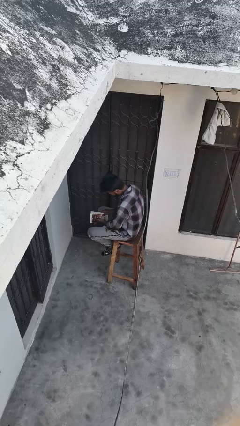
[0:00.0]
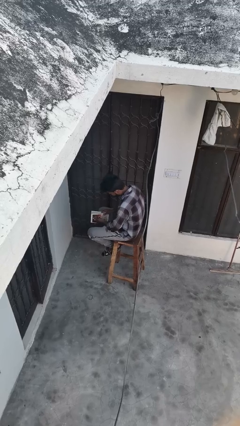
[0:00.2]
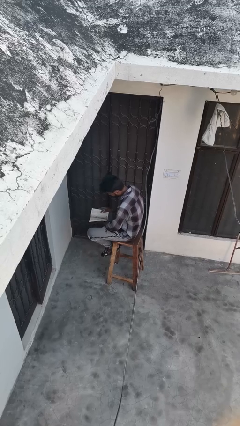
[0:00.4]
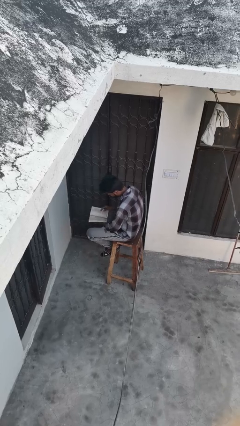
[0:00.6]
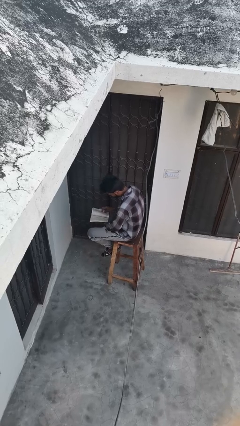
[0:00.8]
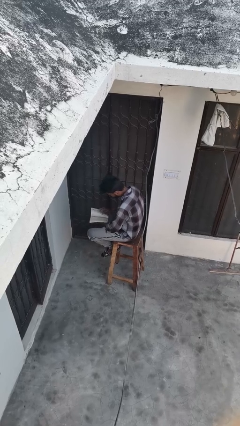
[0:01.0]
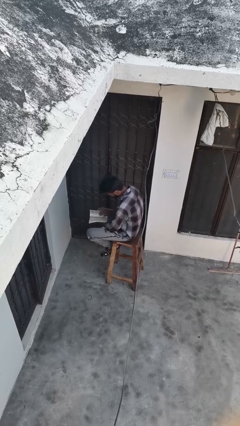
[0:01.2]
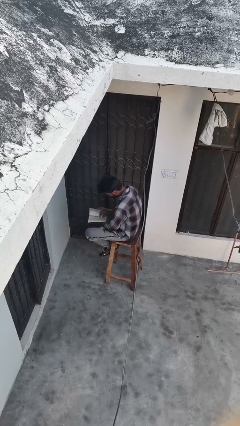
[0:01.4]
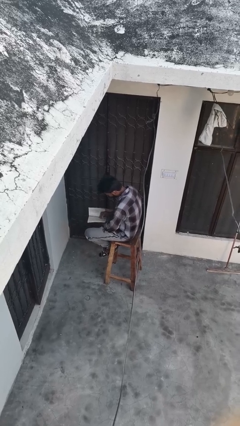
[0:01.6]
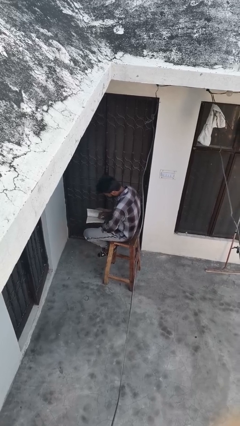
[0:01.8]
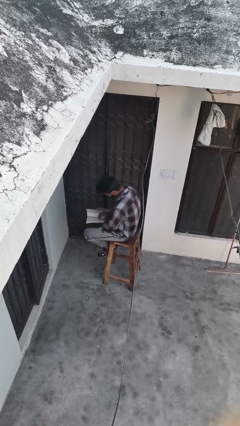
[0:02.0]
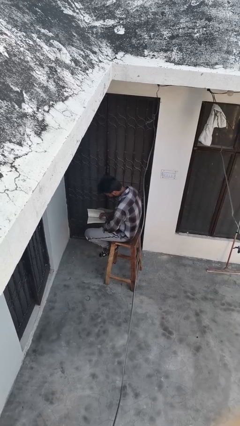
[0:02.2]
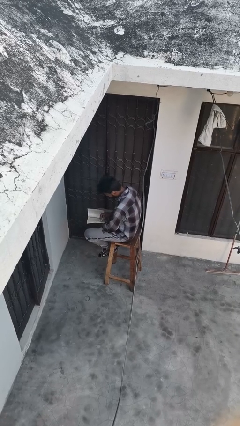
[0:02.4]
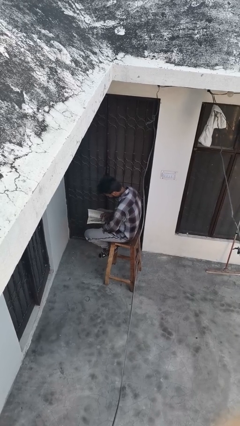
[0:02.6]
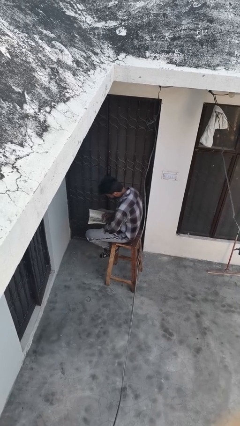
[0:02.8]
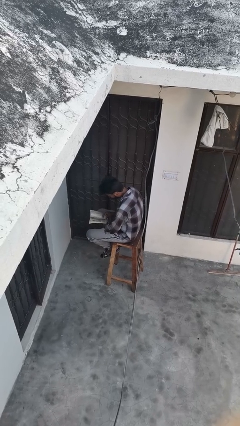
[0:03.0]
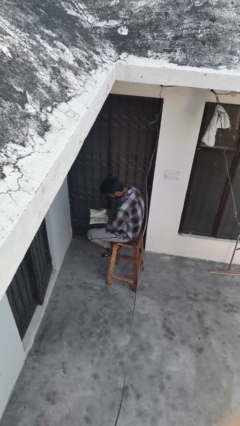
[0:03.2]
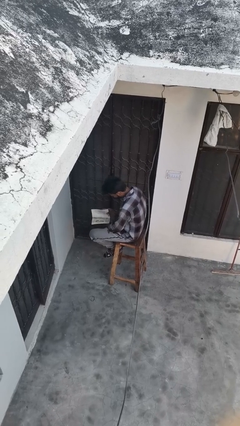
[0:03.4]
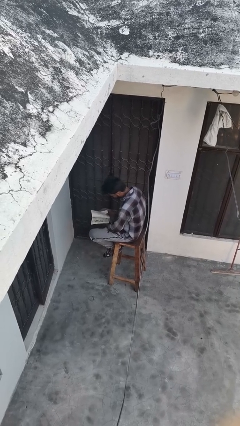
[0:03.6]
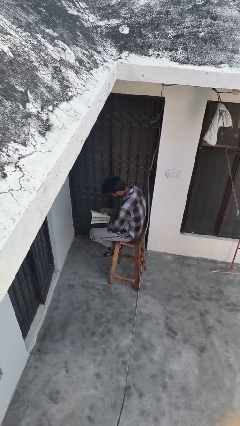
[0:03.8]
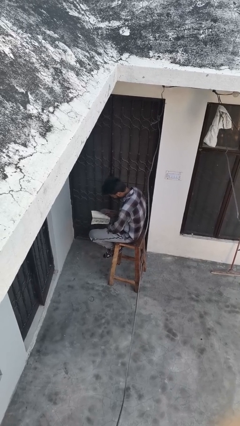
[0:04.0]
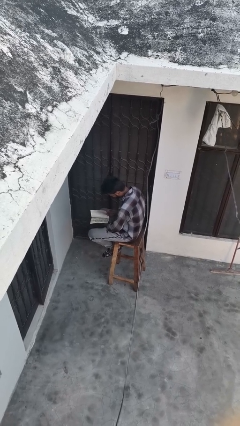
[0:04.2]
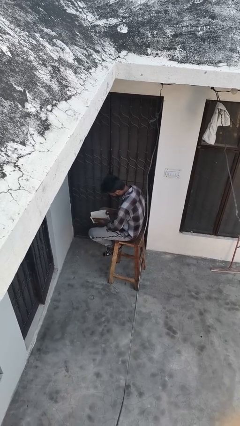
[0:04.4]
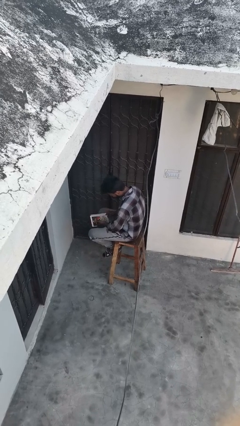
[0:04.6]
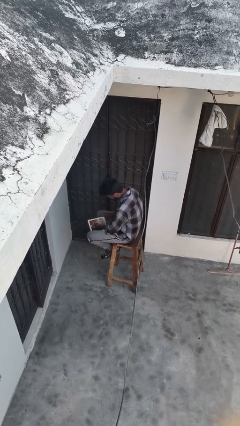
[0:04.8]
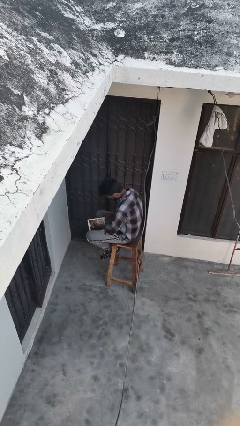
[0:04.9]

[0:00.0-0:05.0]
person reads book

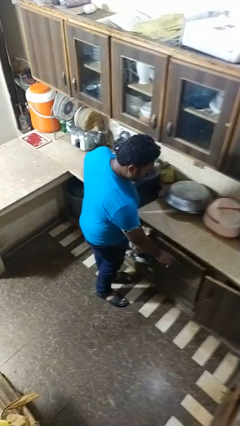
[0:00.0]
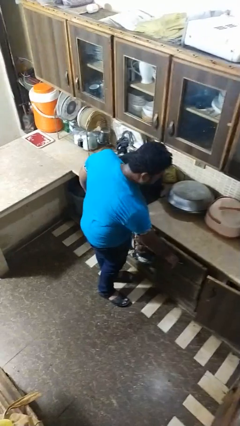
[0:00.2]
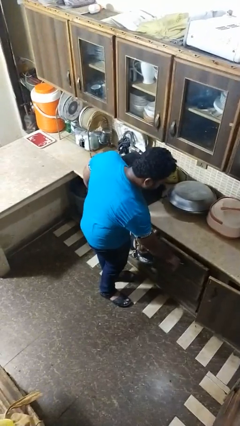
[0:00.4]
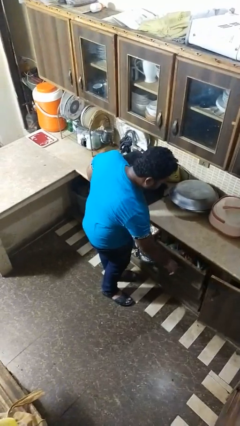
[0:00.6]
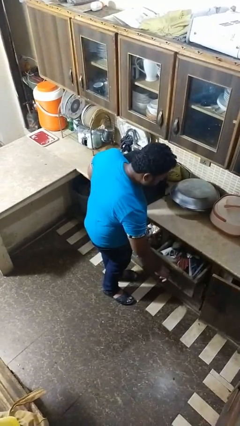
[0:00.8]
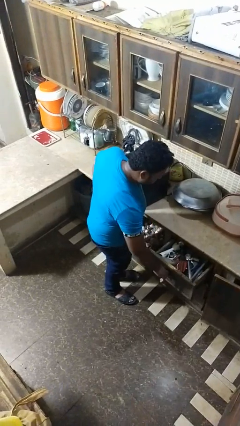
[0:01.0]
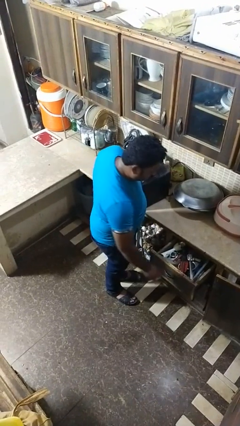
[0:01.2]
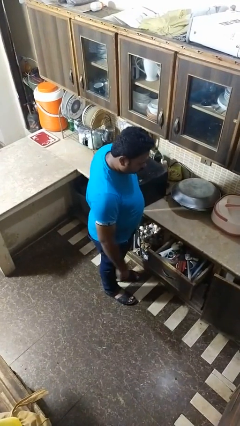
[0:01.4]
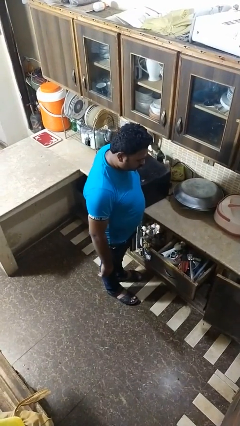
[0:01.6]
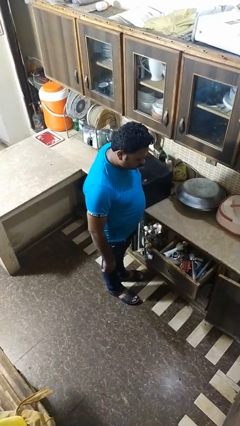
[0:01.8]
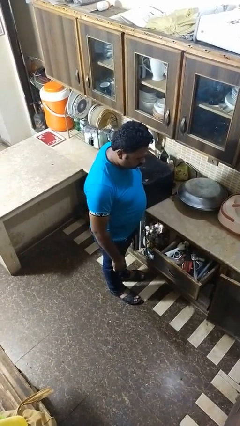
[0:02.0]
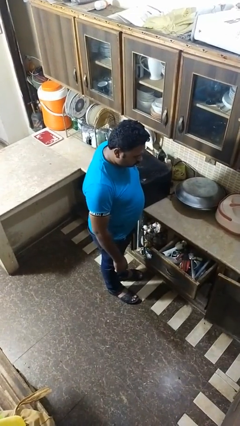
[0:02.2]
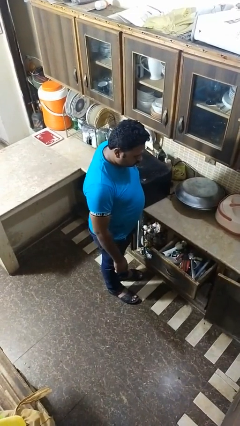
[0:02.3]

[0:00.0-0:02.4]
person opens dresser drawer

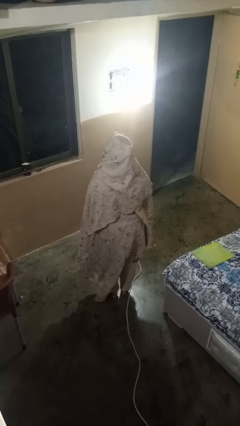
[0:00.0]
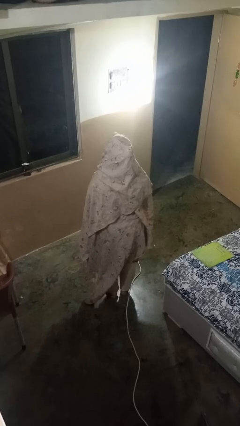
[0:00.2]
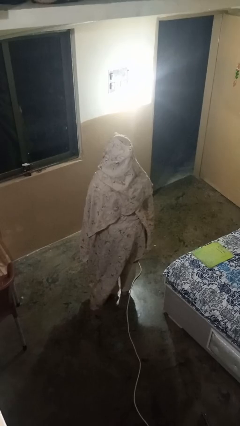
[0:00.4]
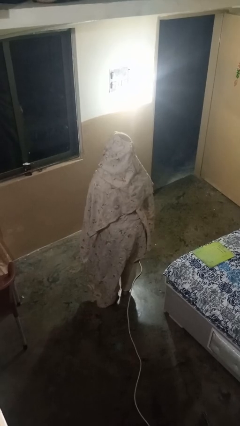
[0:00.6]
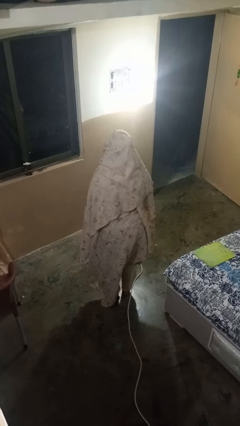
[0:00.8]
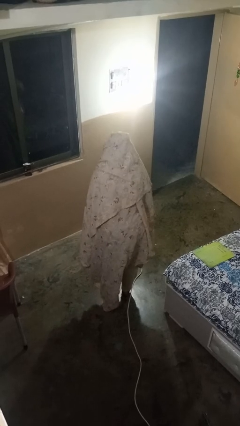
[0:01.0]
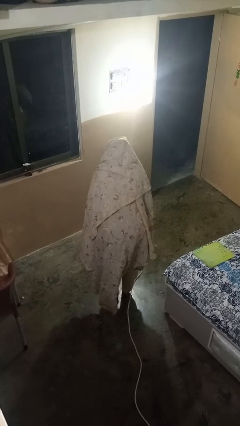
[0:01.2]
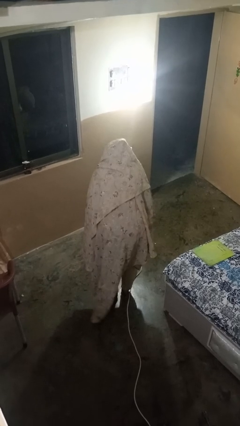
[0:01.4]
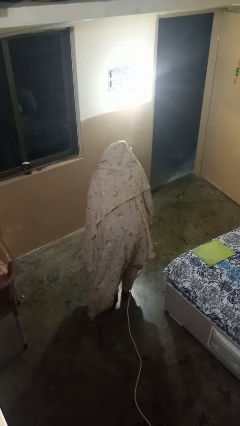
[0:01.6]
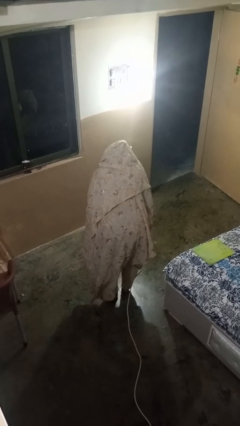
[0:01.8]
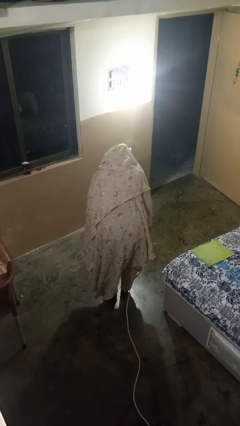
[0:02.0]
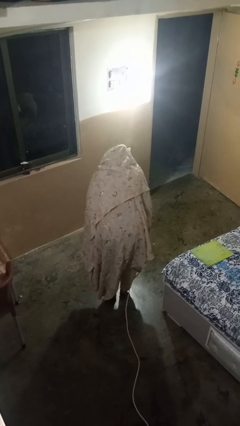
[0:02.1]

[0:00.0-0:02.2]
person bows

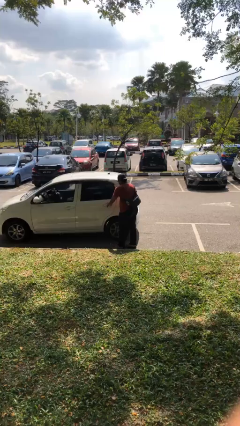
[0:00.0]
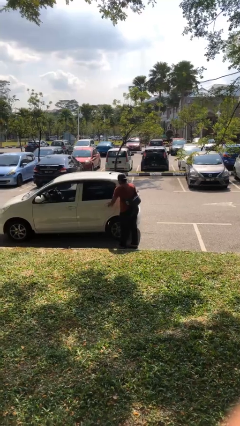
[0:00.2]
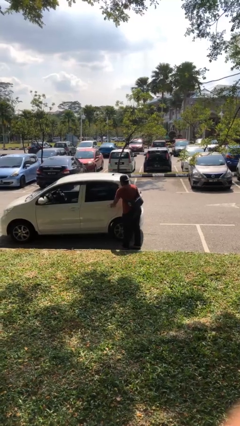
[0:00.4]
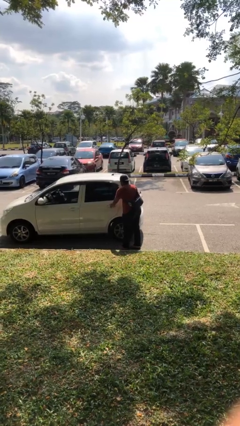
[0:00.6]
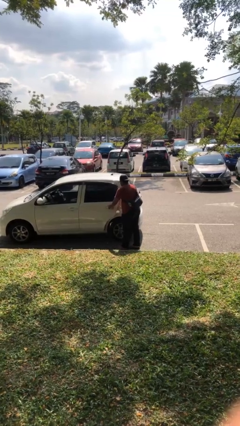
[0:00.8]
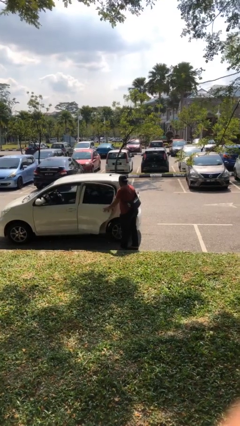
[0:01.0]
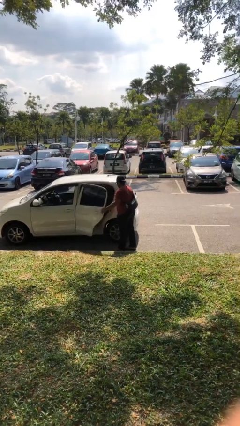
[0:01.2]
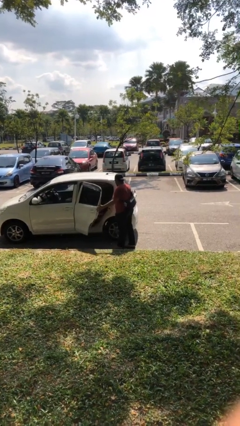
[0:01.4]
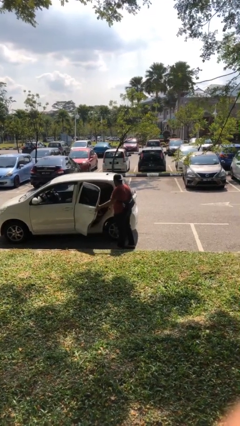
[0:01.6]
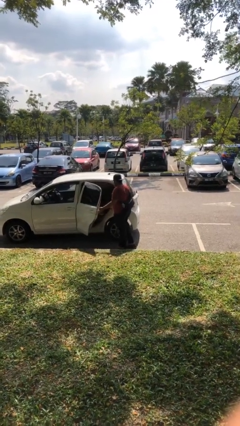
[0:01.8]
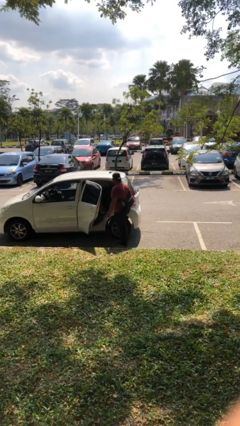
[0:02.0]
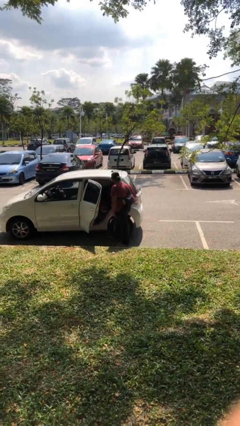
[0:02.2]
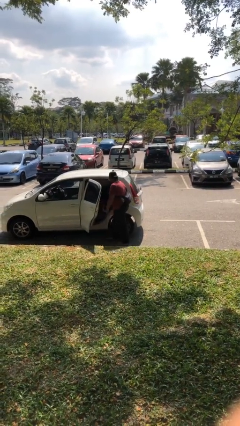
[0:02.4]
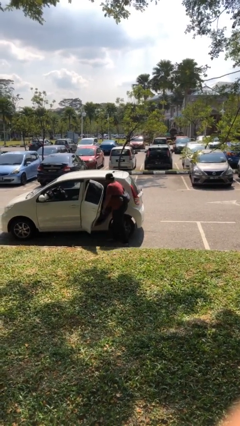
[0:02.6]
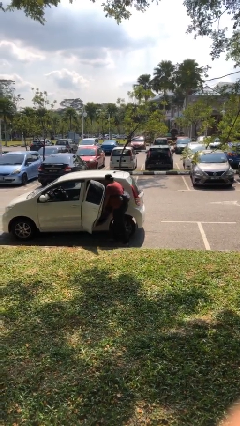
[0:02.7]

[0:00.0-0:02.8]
person opens car door

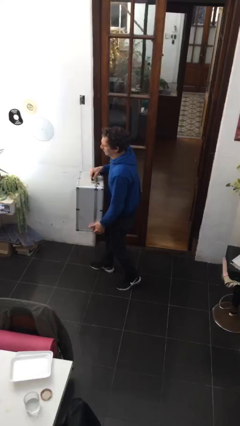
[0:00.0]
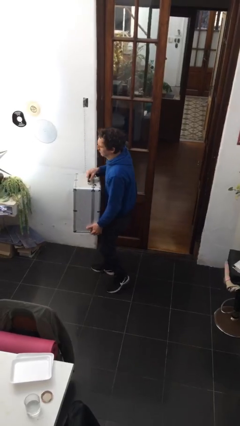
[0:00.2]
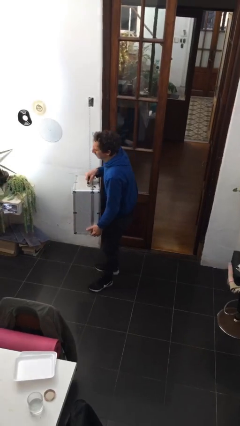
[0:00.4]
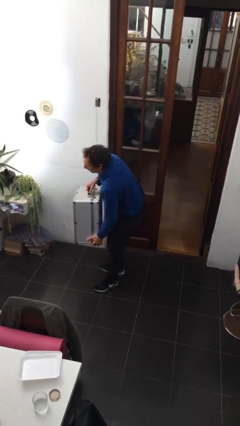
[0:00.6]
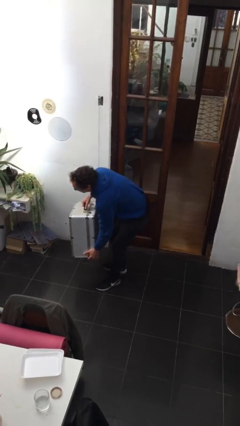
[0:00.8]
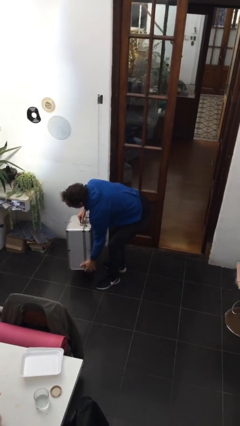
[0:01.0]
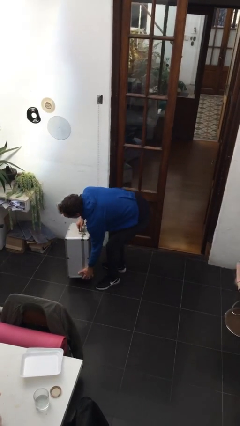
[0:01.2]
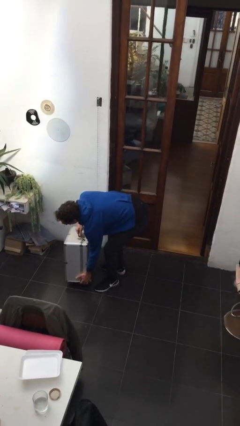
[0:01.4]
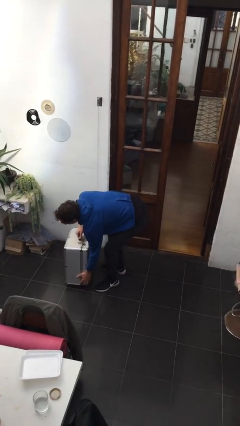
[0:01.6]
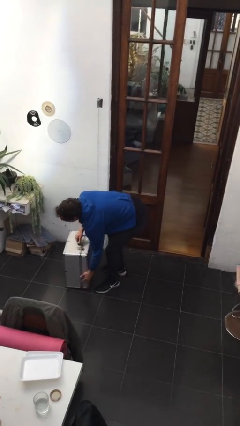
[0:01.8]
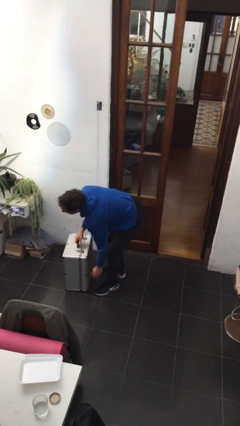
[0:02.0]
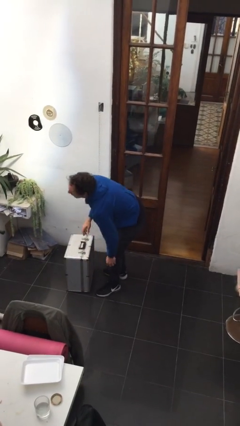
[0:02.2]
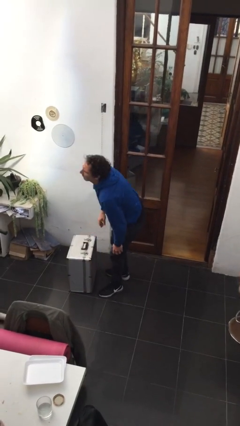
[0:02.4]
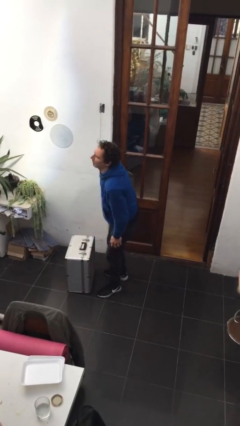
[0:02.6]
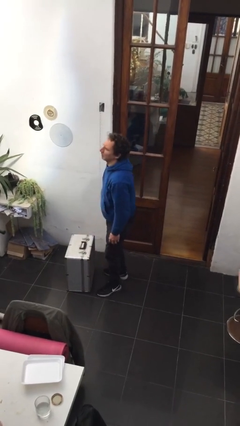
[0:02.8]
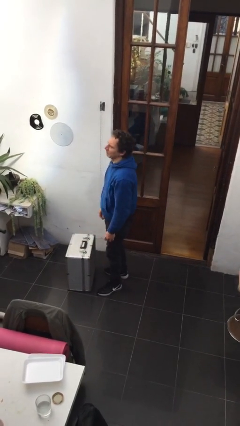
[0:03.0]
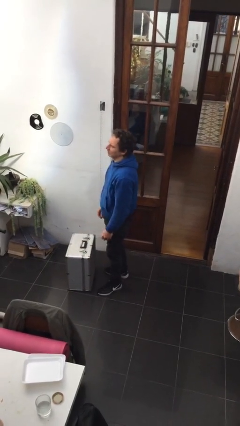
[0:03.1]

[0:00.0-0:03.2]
person puts down object on floor

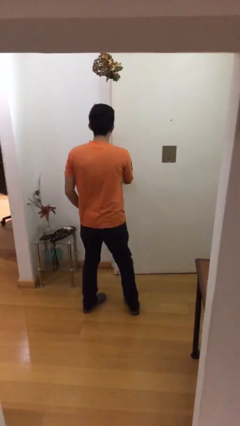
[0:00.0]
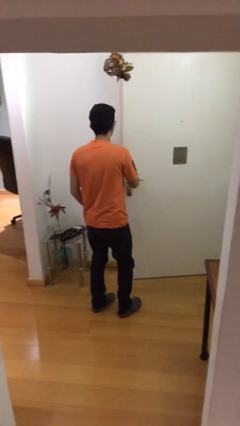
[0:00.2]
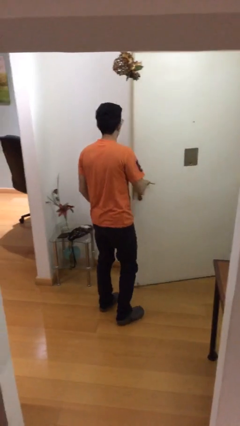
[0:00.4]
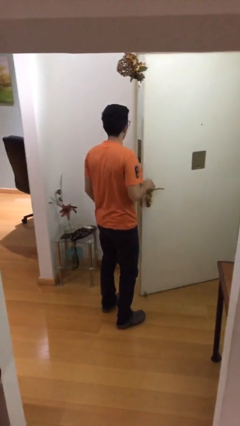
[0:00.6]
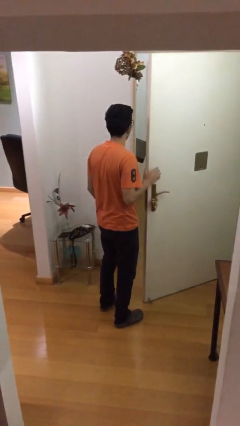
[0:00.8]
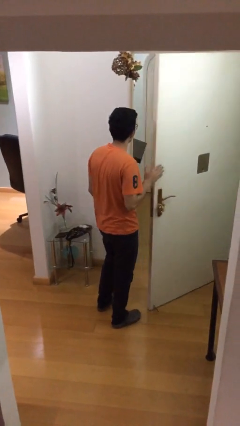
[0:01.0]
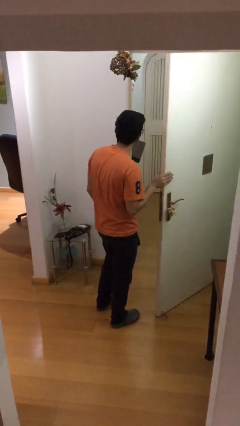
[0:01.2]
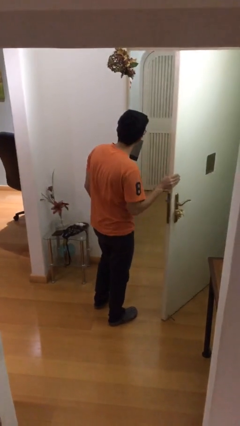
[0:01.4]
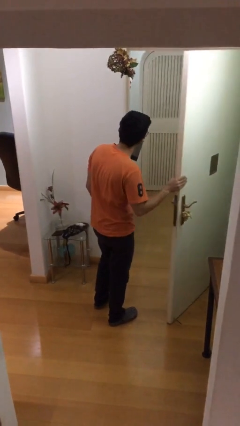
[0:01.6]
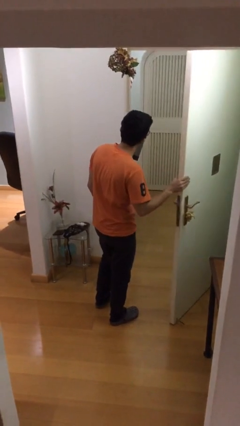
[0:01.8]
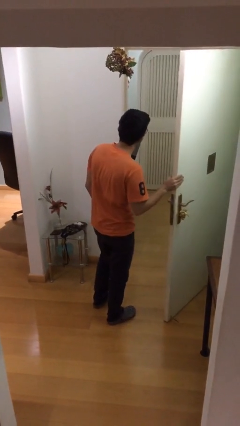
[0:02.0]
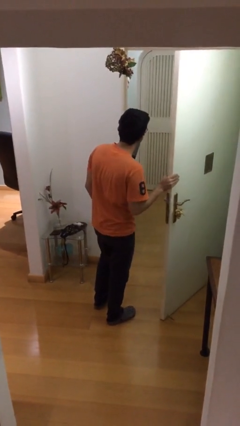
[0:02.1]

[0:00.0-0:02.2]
person opens facility door
